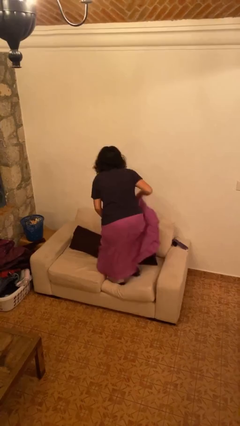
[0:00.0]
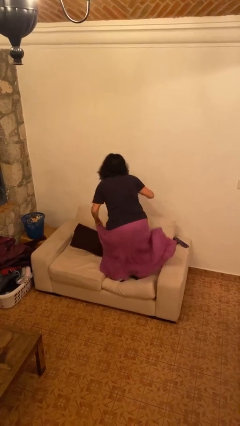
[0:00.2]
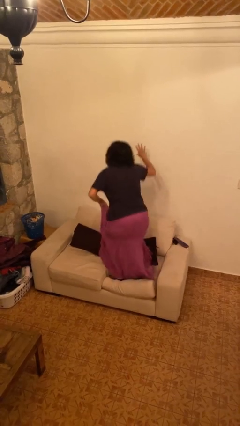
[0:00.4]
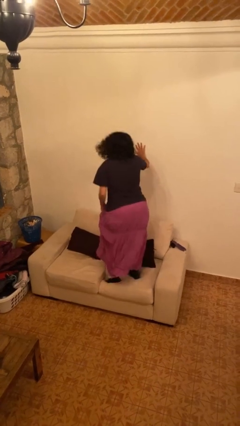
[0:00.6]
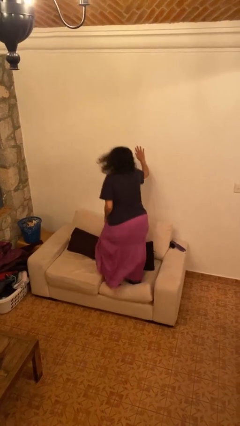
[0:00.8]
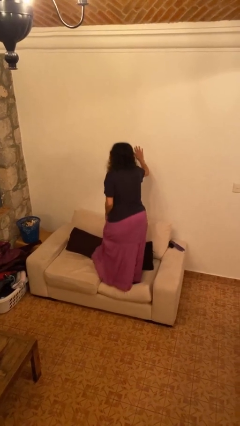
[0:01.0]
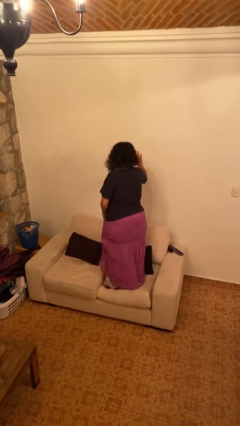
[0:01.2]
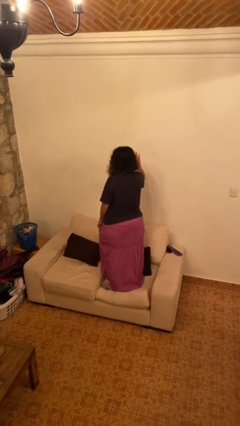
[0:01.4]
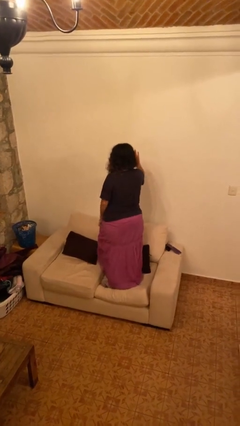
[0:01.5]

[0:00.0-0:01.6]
person jumps on couch

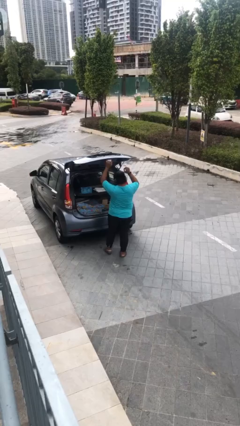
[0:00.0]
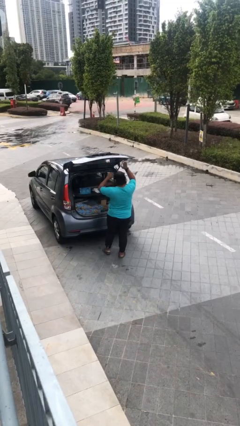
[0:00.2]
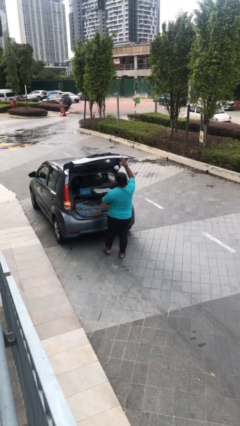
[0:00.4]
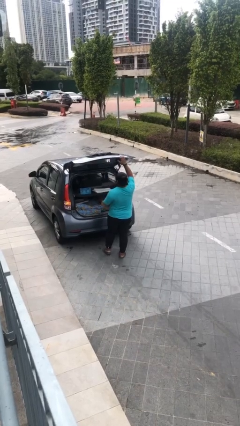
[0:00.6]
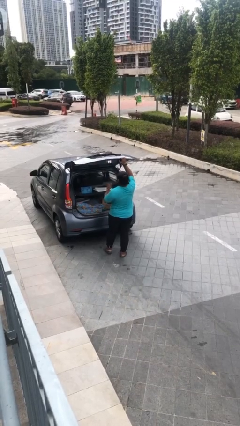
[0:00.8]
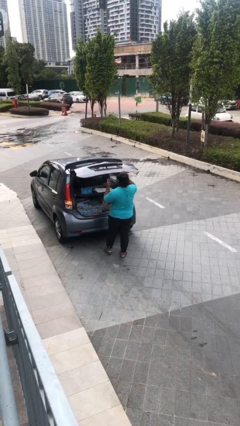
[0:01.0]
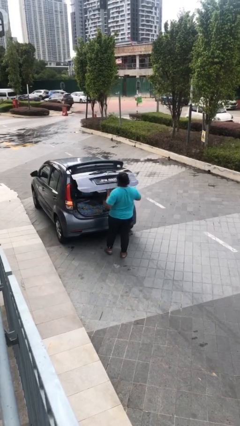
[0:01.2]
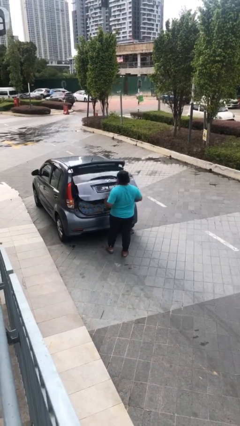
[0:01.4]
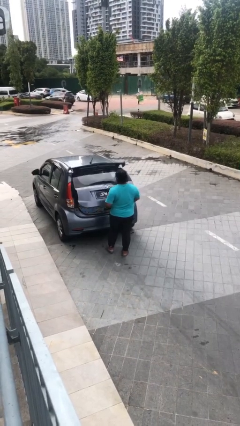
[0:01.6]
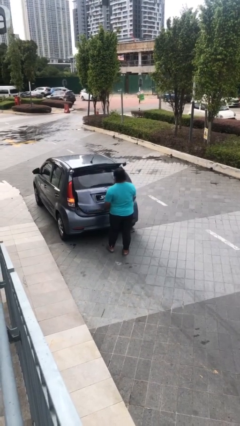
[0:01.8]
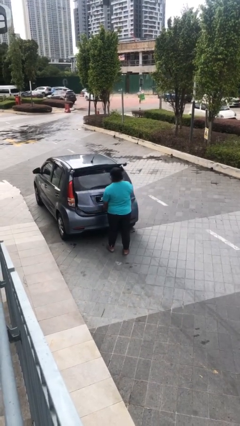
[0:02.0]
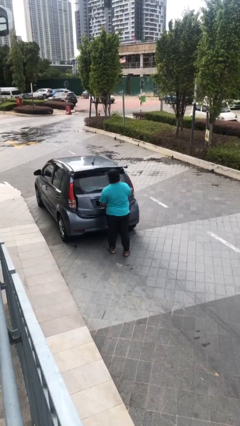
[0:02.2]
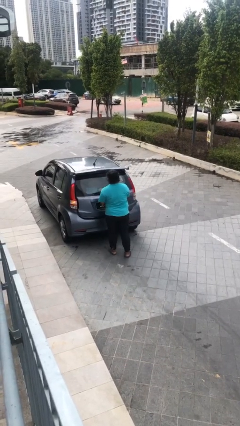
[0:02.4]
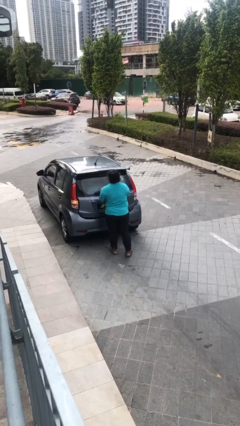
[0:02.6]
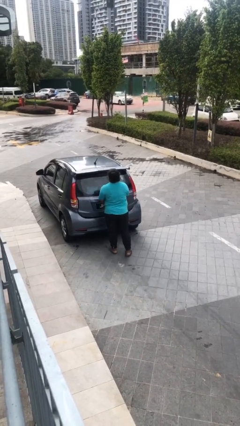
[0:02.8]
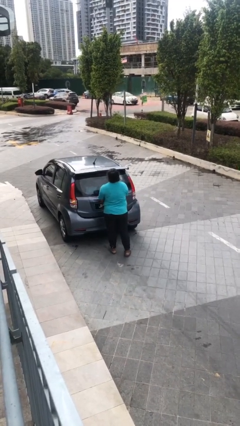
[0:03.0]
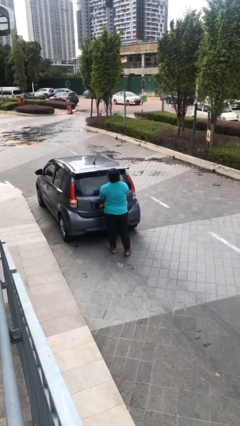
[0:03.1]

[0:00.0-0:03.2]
person closes car trunk

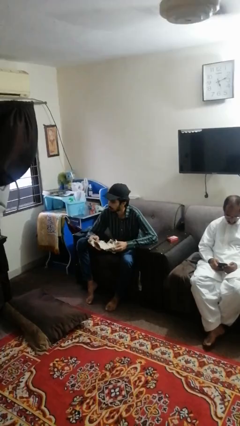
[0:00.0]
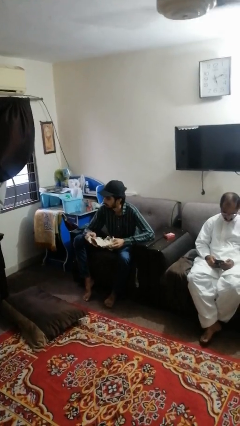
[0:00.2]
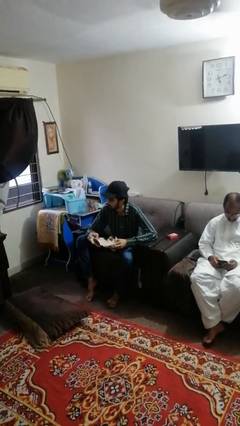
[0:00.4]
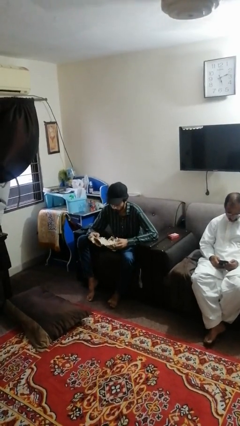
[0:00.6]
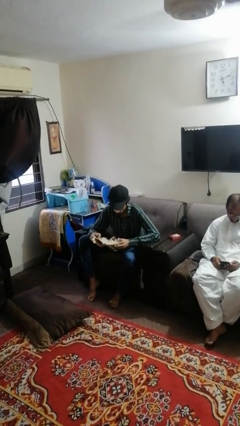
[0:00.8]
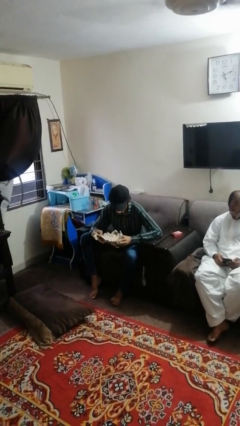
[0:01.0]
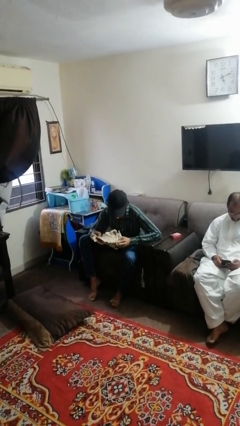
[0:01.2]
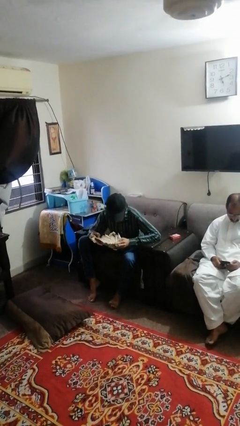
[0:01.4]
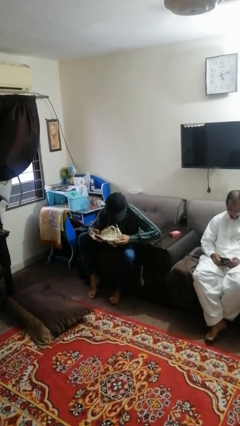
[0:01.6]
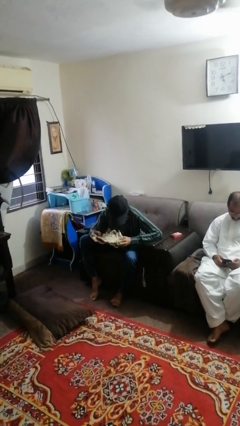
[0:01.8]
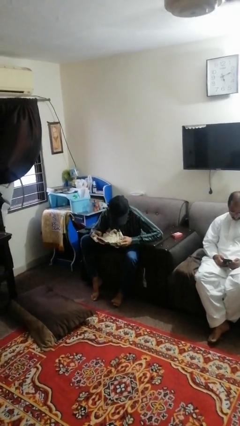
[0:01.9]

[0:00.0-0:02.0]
person reads newspaper

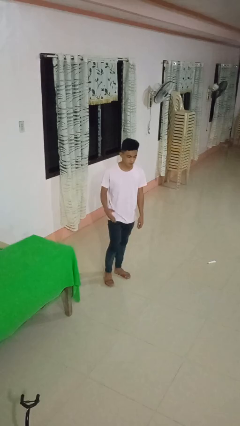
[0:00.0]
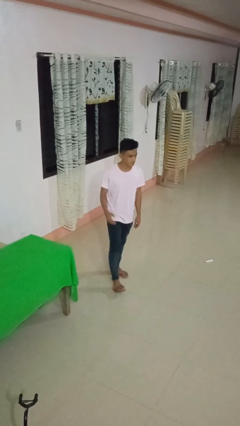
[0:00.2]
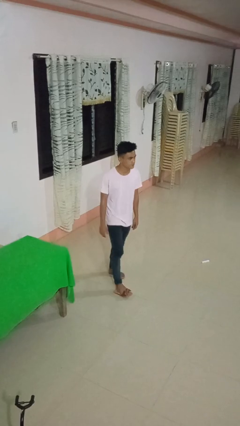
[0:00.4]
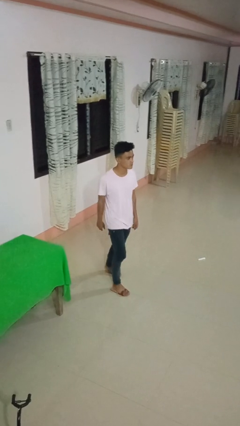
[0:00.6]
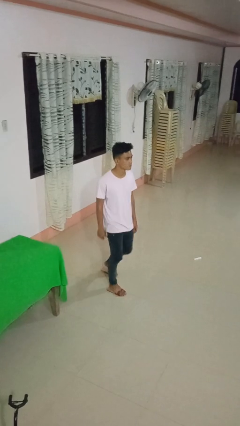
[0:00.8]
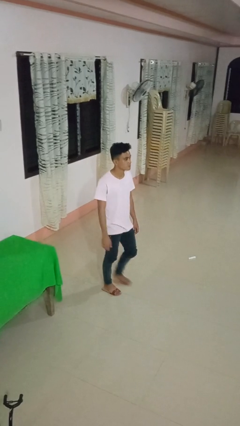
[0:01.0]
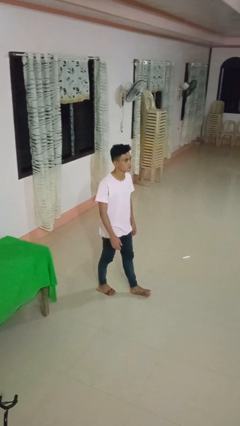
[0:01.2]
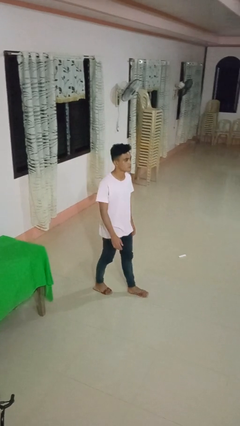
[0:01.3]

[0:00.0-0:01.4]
person slaps hands on thighs

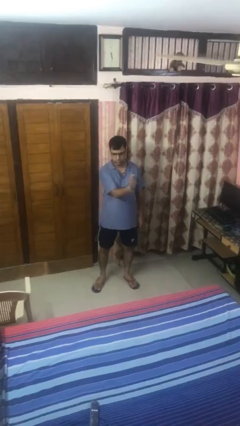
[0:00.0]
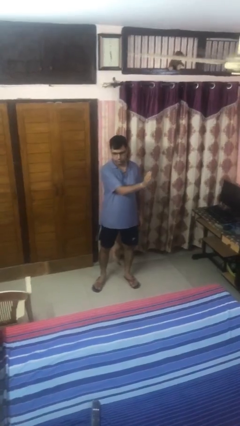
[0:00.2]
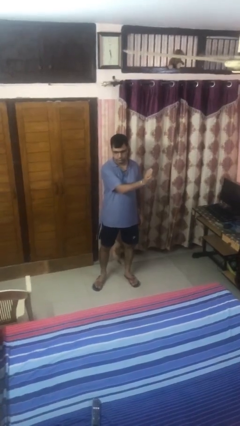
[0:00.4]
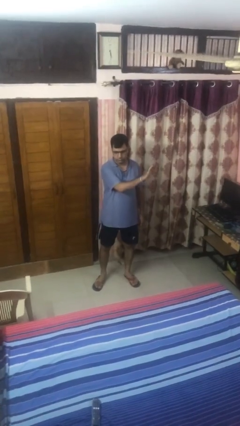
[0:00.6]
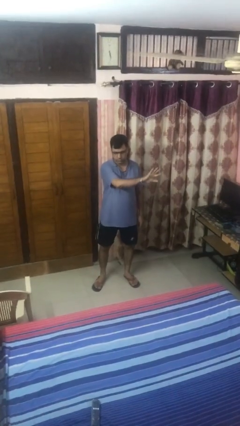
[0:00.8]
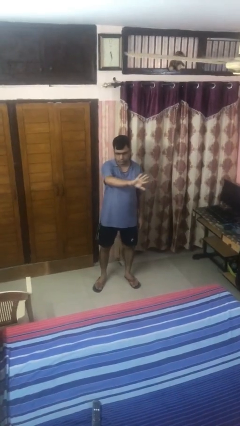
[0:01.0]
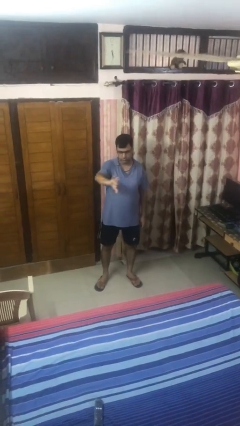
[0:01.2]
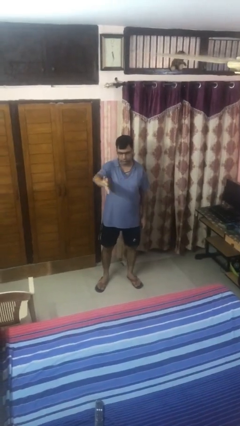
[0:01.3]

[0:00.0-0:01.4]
person gestures swipe right

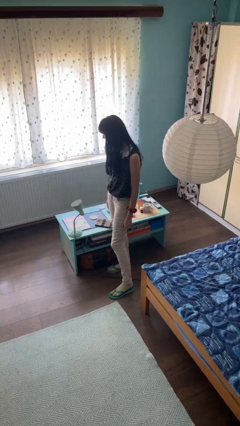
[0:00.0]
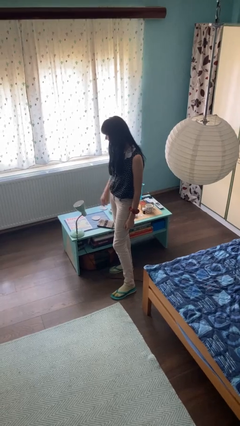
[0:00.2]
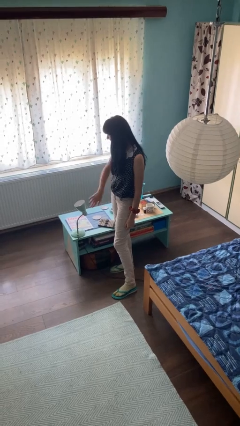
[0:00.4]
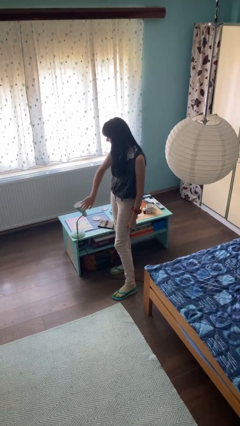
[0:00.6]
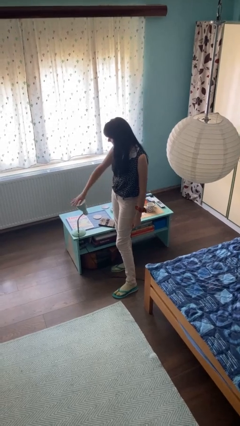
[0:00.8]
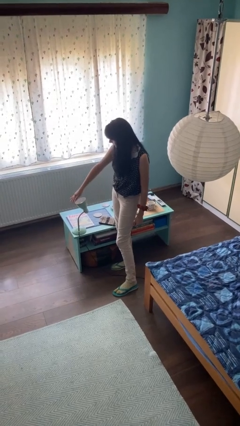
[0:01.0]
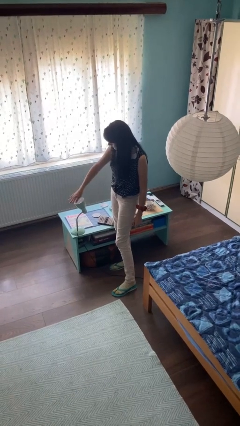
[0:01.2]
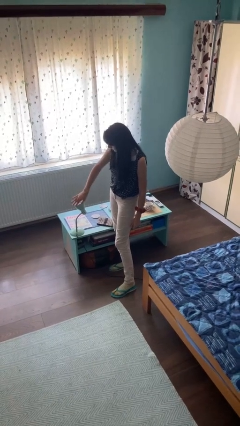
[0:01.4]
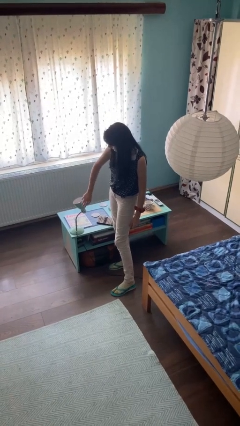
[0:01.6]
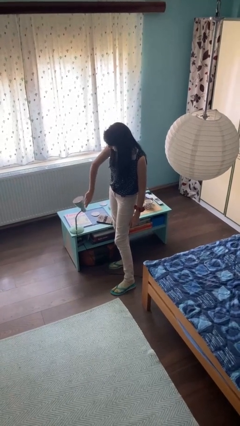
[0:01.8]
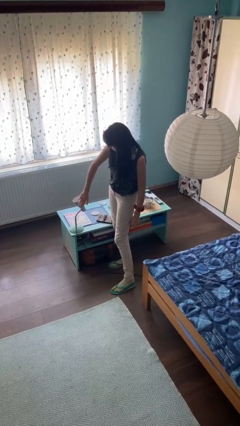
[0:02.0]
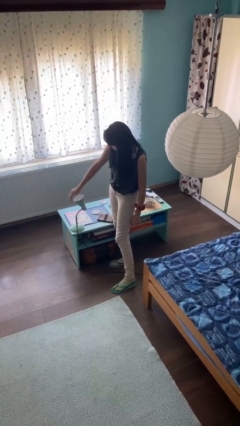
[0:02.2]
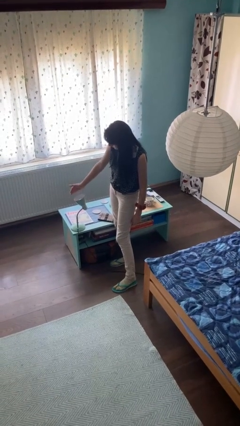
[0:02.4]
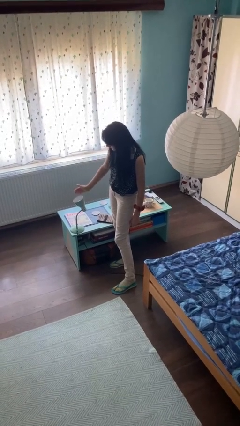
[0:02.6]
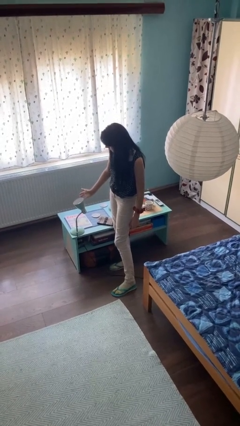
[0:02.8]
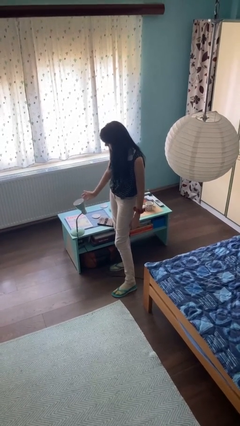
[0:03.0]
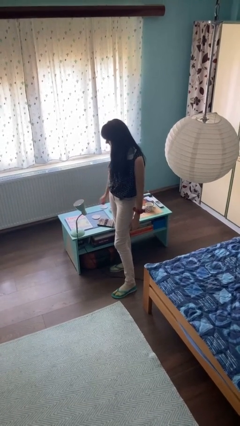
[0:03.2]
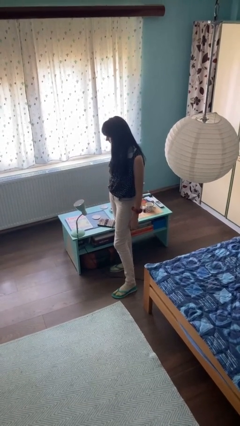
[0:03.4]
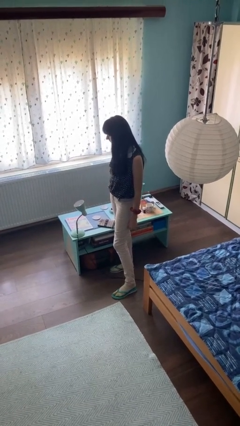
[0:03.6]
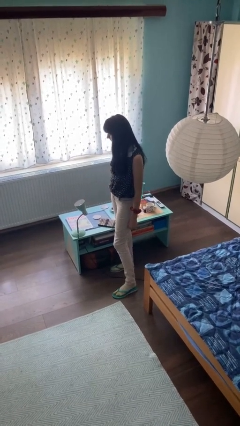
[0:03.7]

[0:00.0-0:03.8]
person waves hand over object

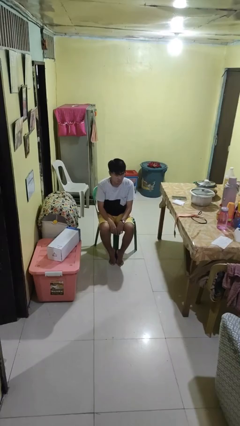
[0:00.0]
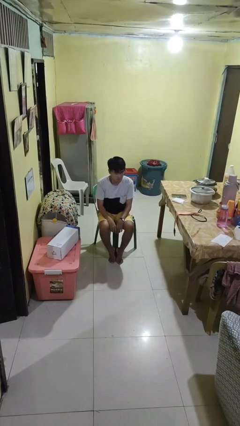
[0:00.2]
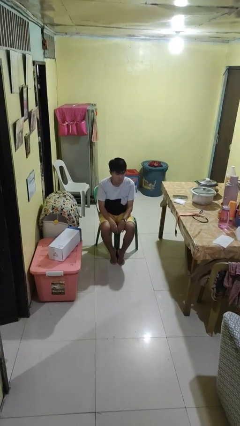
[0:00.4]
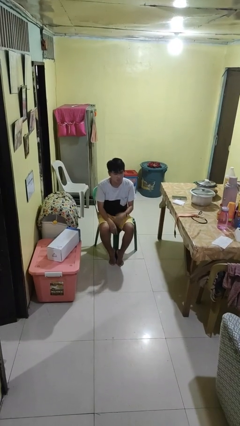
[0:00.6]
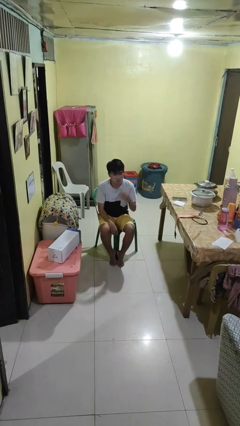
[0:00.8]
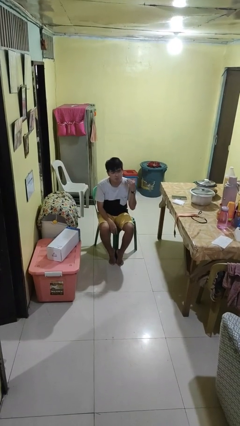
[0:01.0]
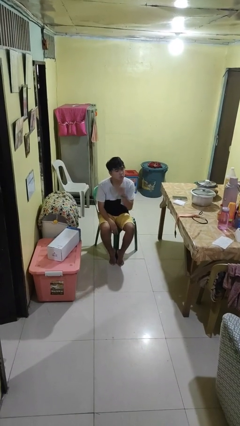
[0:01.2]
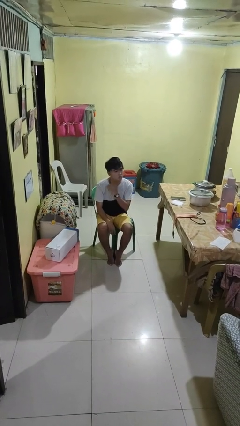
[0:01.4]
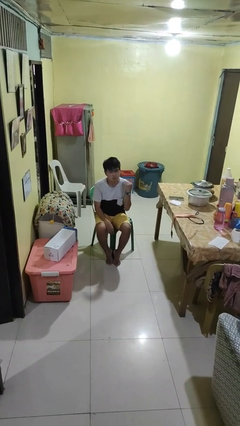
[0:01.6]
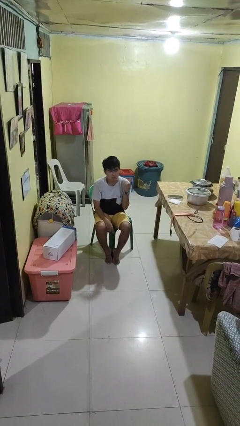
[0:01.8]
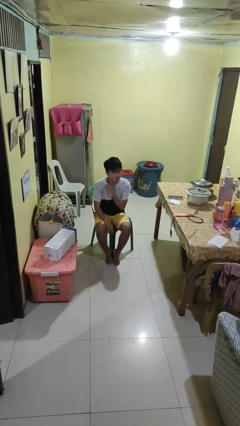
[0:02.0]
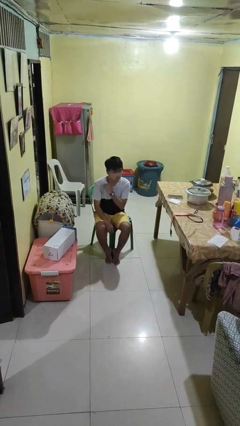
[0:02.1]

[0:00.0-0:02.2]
person gestures cut

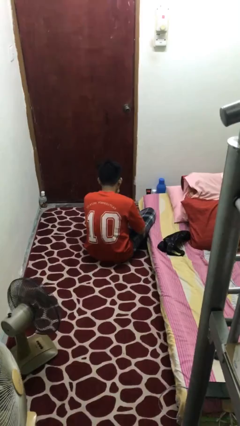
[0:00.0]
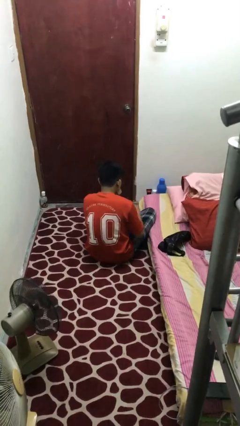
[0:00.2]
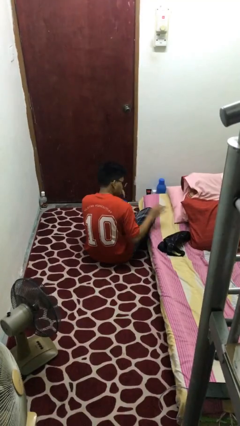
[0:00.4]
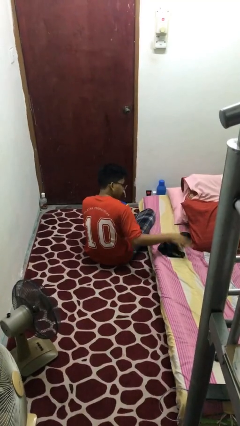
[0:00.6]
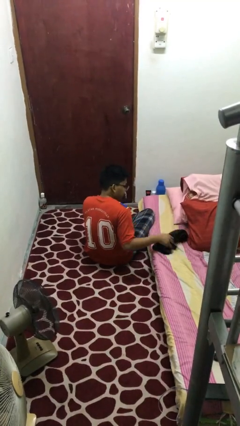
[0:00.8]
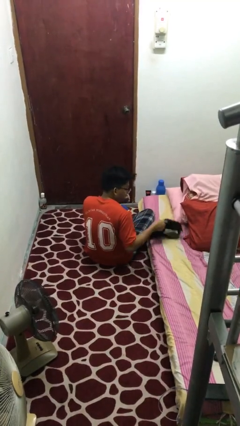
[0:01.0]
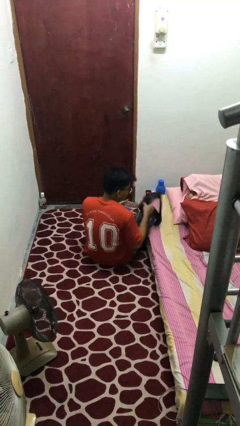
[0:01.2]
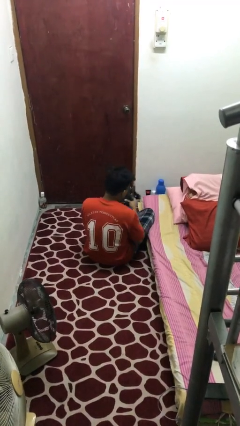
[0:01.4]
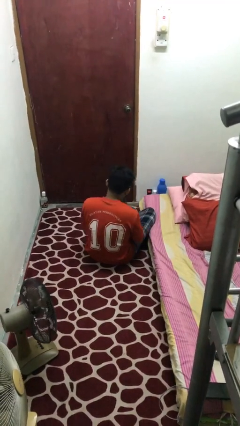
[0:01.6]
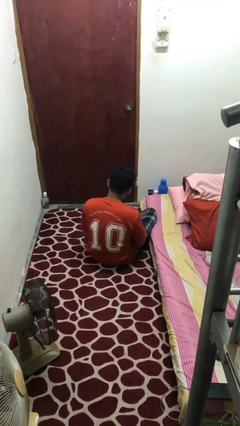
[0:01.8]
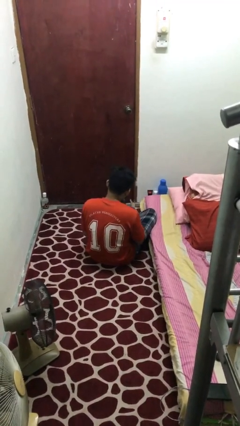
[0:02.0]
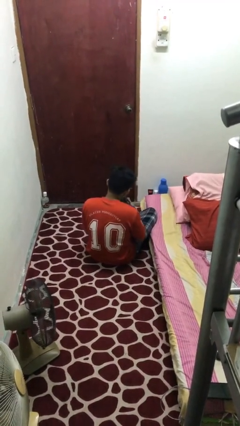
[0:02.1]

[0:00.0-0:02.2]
person picks up object from bed
